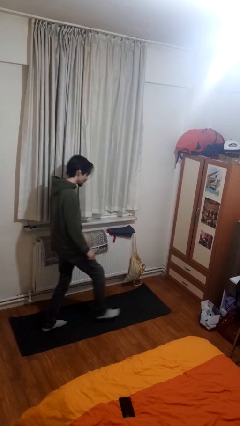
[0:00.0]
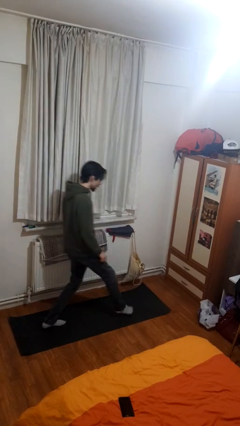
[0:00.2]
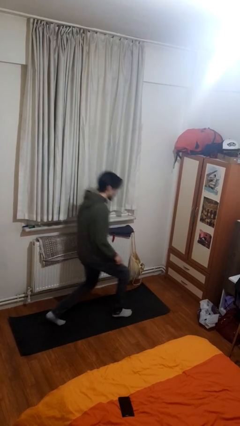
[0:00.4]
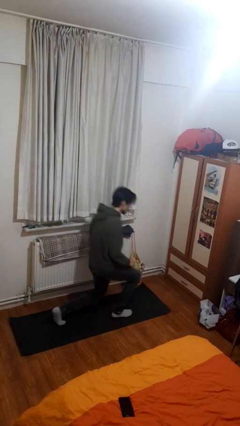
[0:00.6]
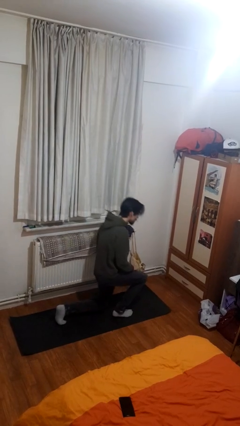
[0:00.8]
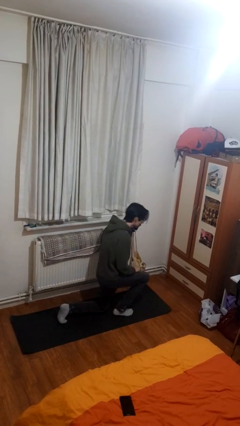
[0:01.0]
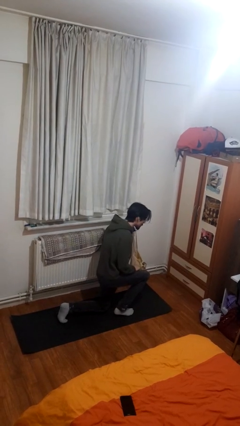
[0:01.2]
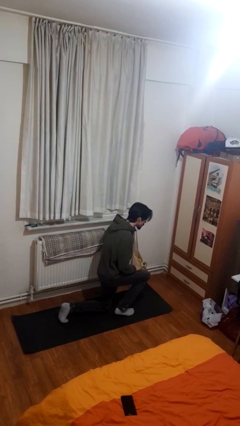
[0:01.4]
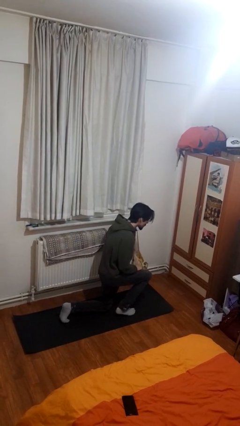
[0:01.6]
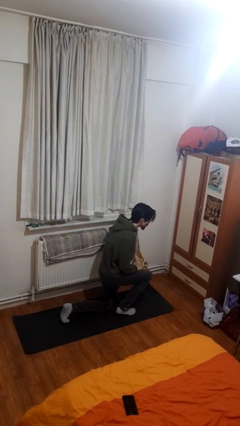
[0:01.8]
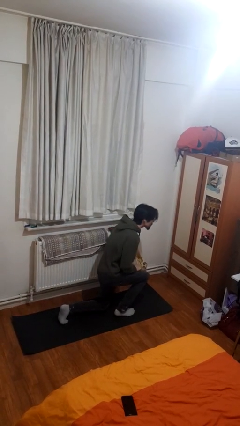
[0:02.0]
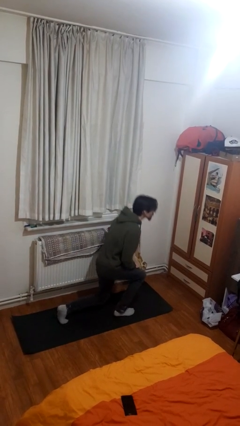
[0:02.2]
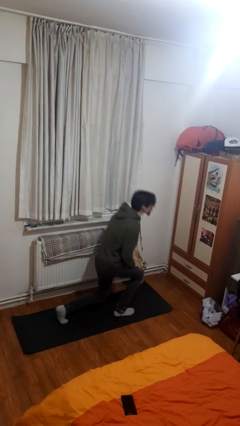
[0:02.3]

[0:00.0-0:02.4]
person kneels

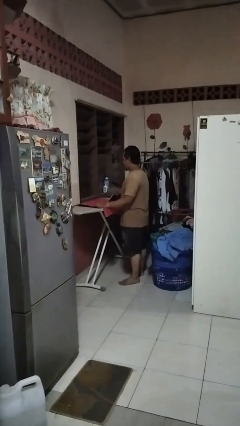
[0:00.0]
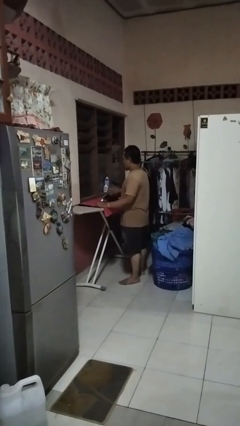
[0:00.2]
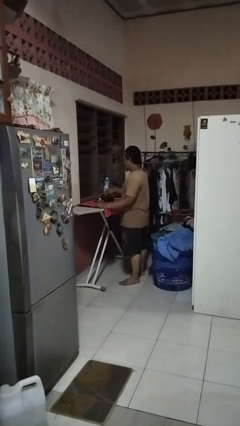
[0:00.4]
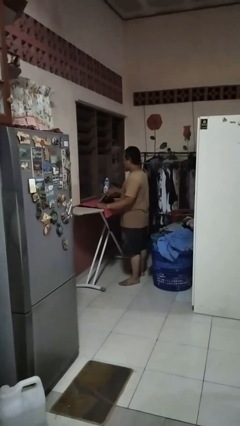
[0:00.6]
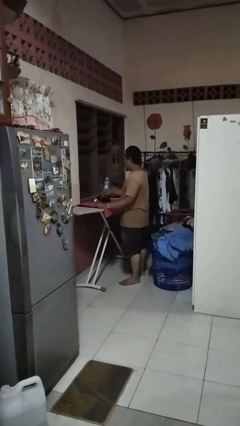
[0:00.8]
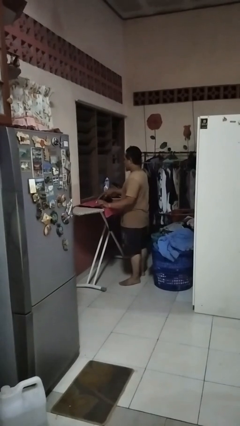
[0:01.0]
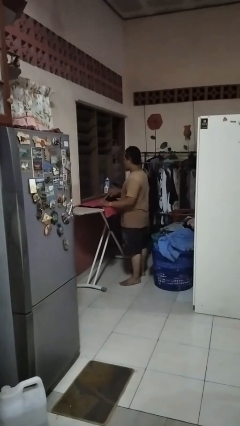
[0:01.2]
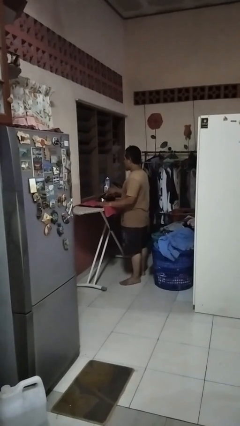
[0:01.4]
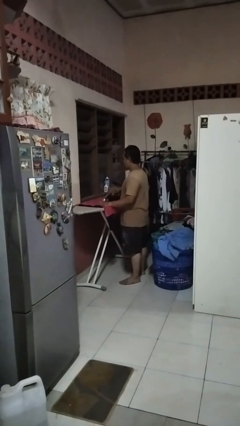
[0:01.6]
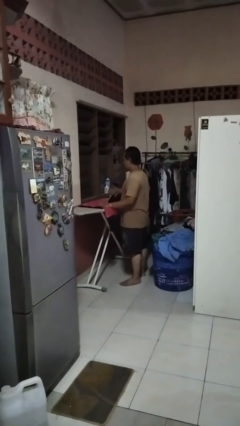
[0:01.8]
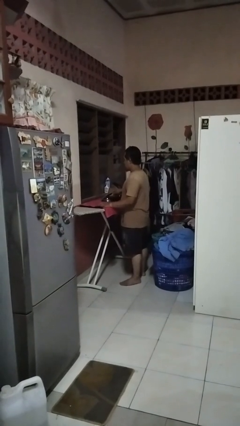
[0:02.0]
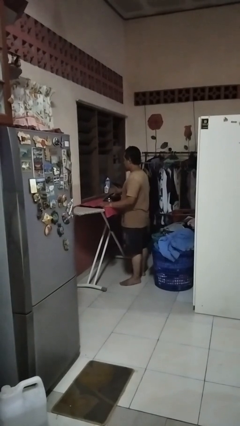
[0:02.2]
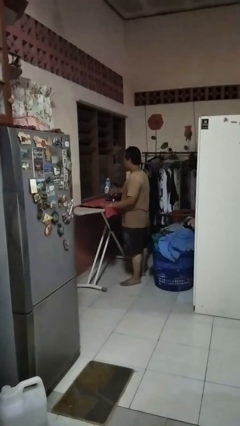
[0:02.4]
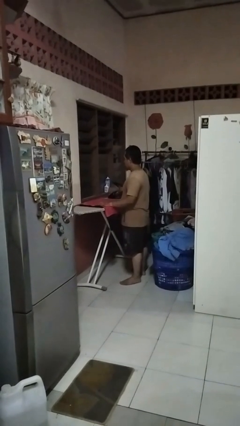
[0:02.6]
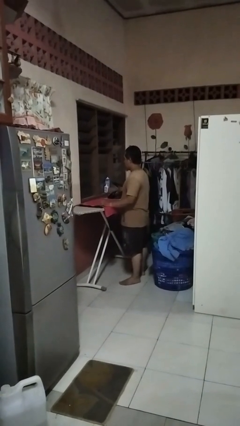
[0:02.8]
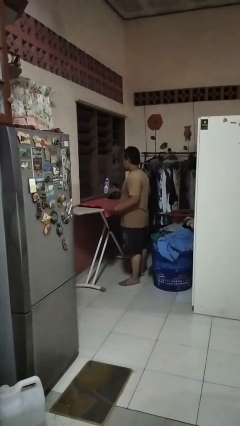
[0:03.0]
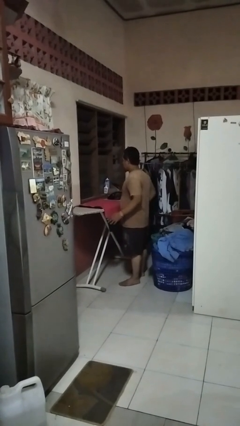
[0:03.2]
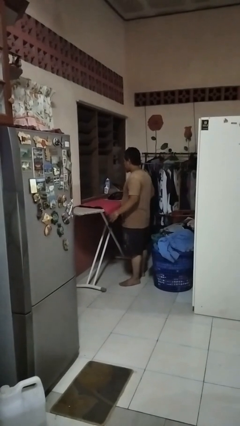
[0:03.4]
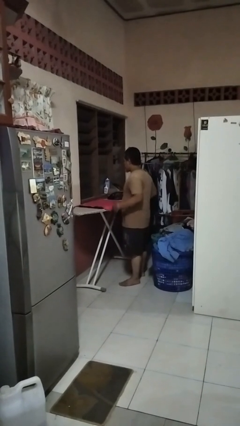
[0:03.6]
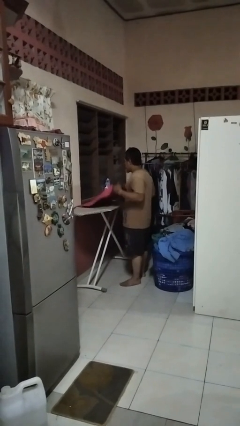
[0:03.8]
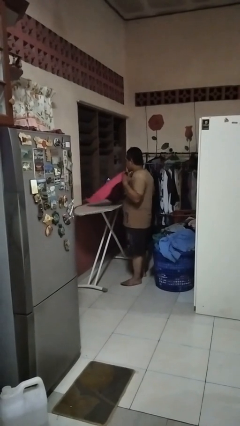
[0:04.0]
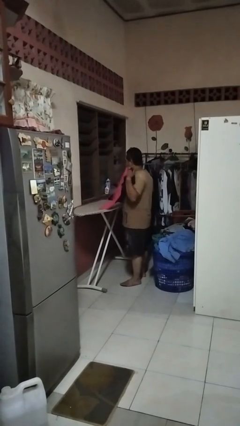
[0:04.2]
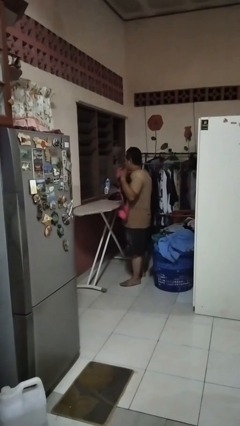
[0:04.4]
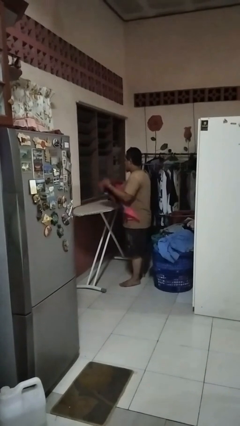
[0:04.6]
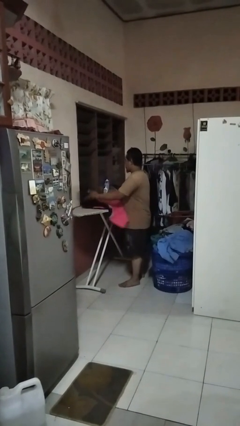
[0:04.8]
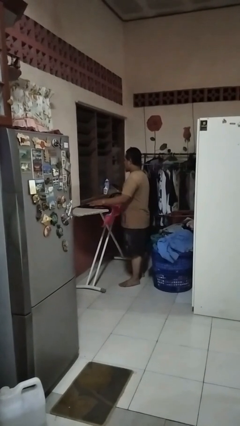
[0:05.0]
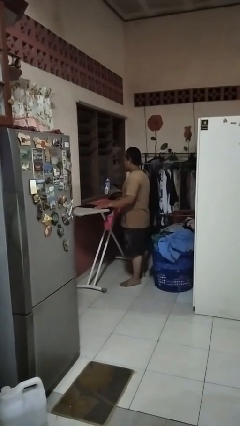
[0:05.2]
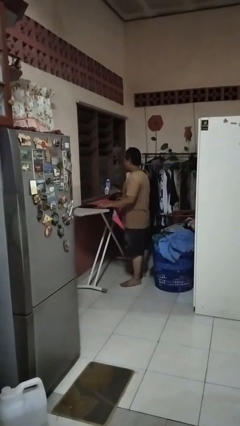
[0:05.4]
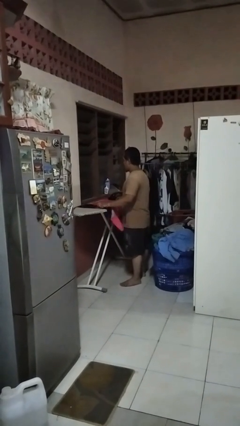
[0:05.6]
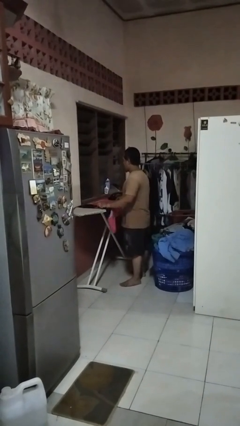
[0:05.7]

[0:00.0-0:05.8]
person irons clothes

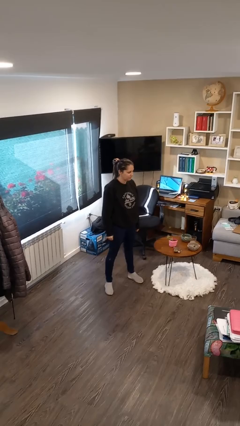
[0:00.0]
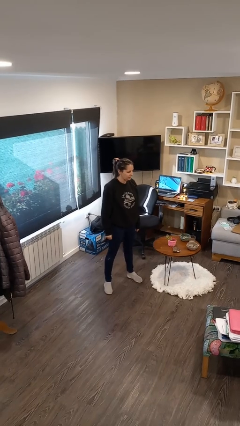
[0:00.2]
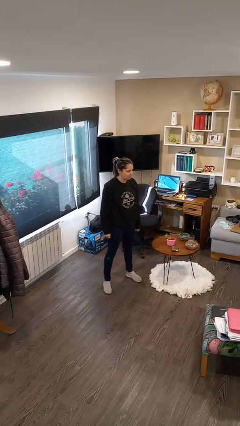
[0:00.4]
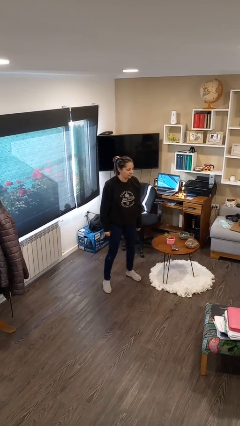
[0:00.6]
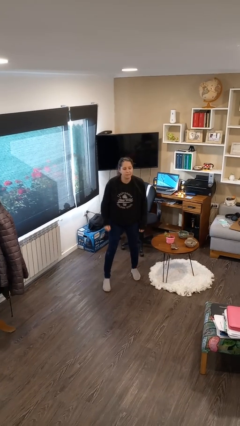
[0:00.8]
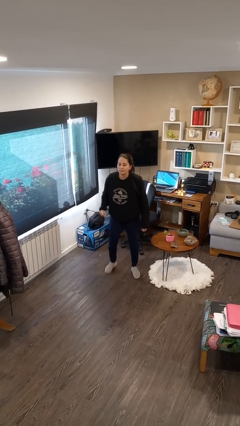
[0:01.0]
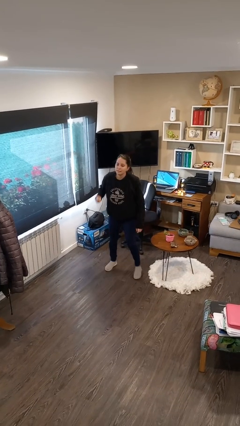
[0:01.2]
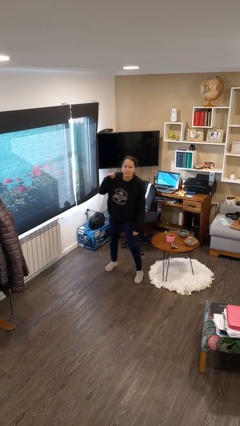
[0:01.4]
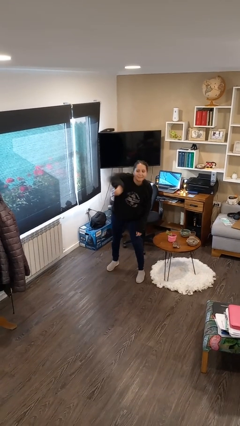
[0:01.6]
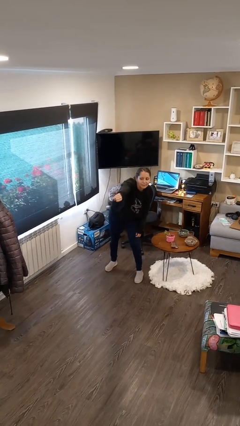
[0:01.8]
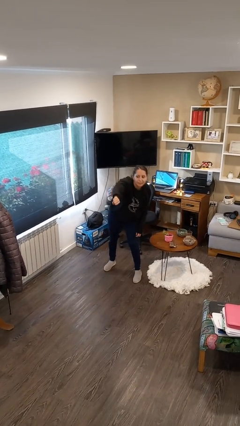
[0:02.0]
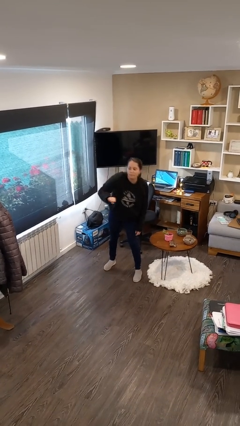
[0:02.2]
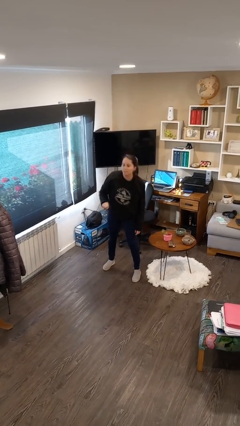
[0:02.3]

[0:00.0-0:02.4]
person punches

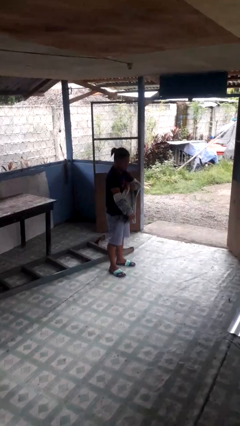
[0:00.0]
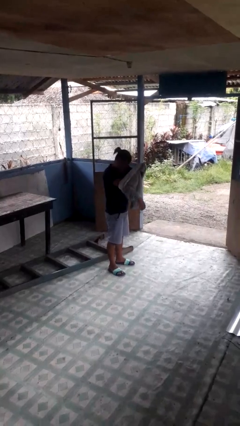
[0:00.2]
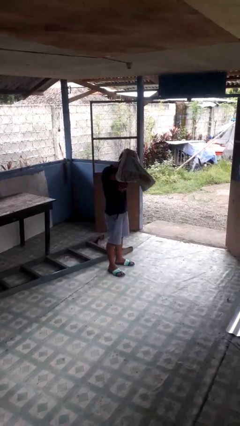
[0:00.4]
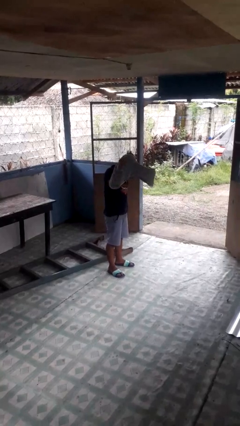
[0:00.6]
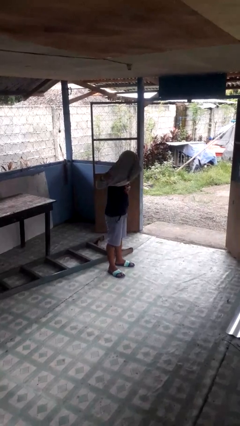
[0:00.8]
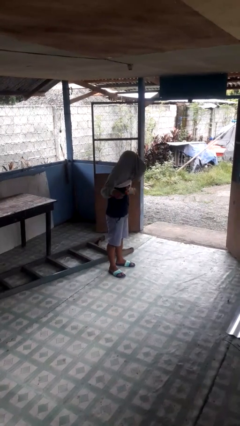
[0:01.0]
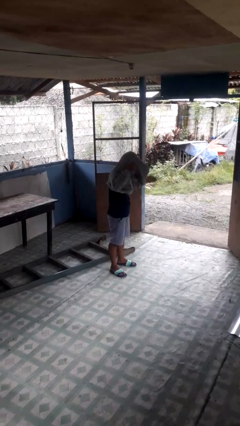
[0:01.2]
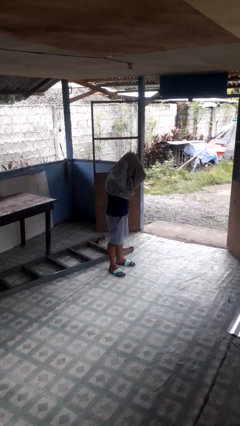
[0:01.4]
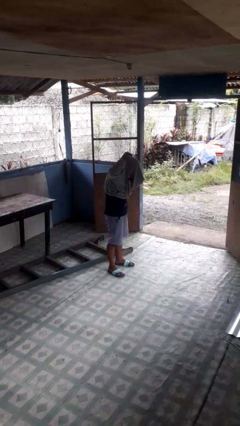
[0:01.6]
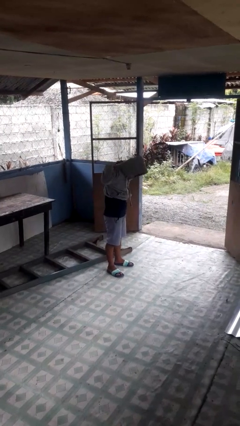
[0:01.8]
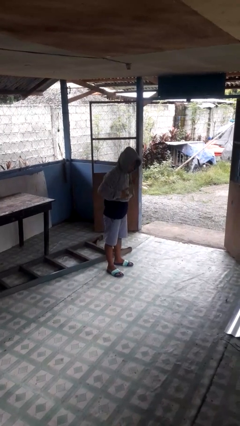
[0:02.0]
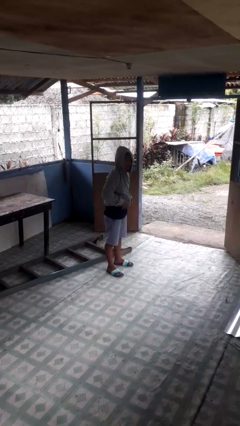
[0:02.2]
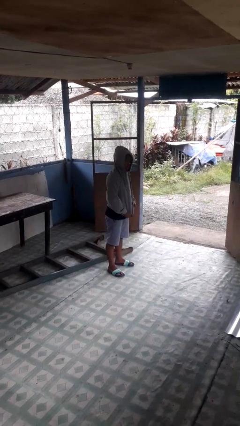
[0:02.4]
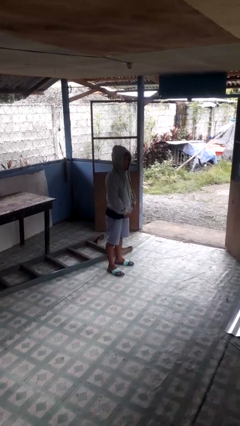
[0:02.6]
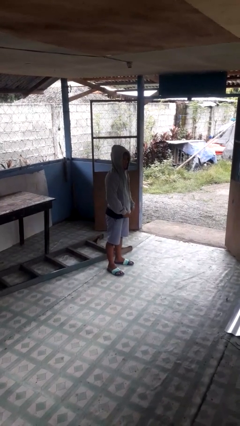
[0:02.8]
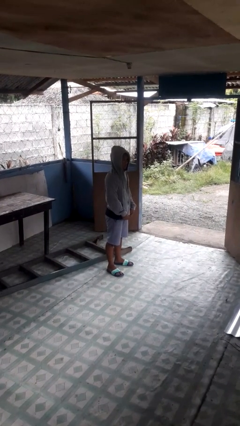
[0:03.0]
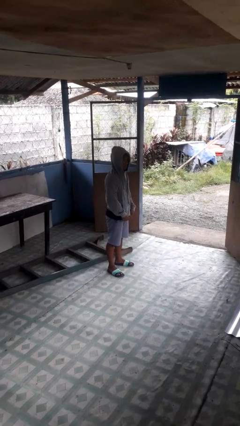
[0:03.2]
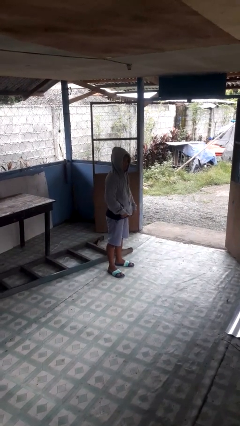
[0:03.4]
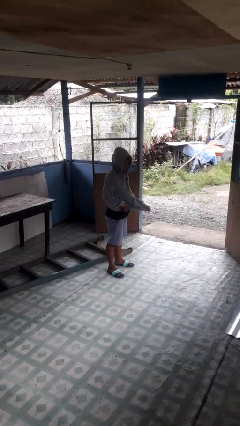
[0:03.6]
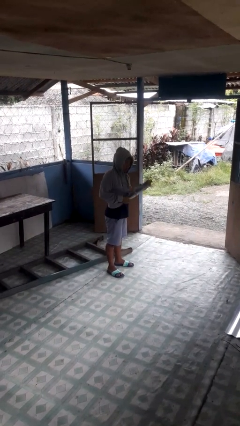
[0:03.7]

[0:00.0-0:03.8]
person puts on hoodie

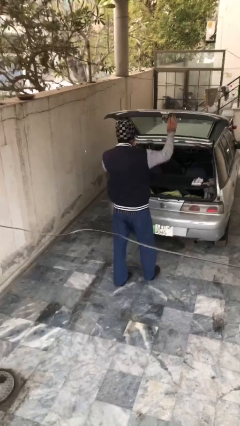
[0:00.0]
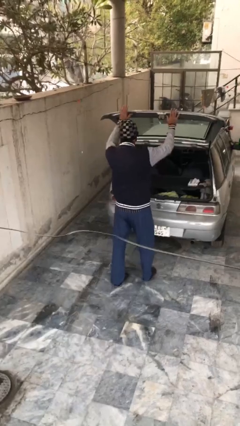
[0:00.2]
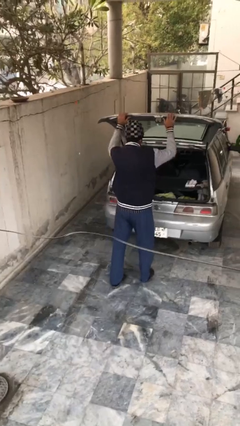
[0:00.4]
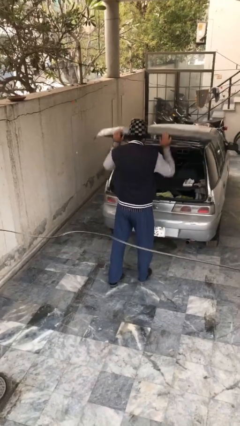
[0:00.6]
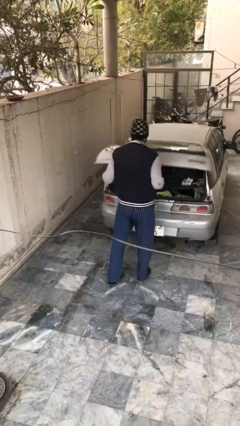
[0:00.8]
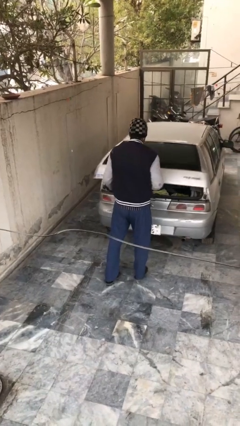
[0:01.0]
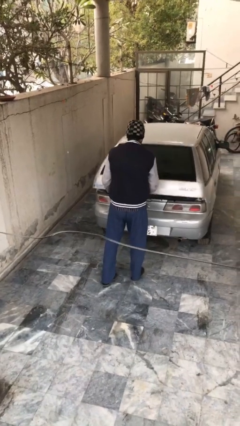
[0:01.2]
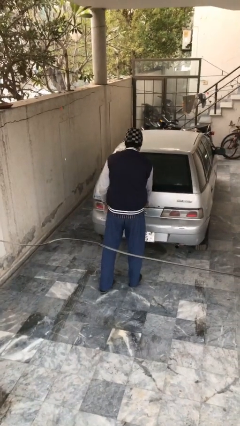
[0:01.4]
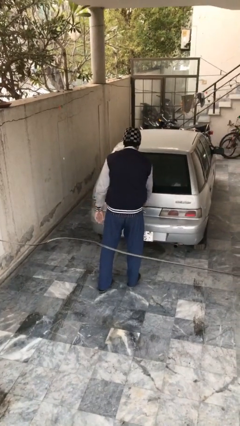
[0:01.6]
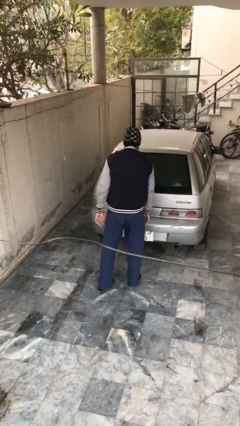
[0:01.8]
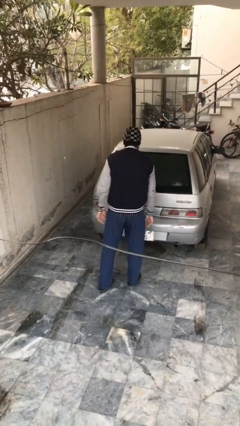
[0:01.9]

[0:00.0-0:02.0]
person closes car trunk

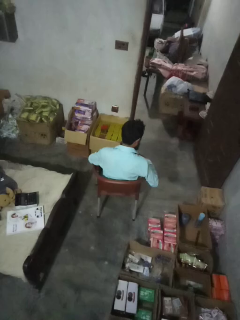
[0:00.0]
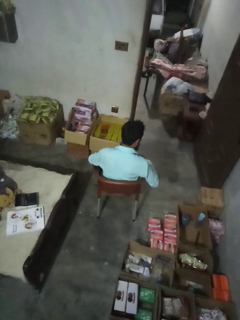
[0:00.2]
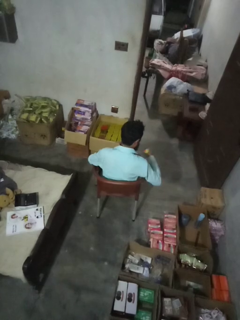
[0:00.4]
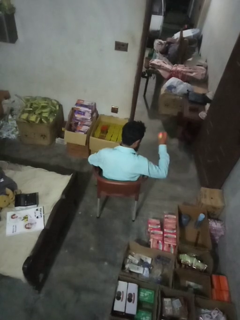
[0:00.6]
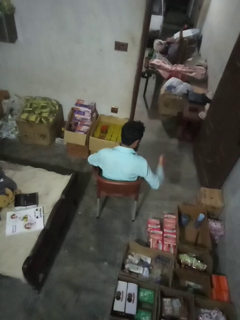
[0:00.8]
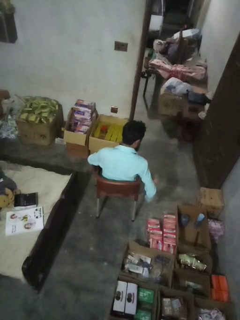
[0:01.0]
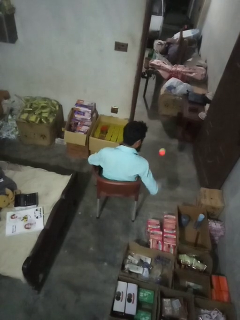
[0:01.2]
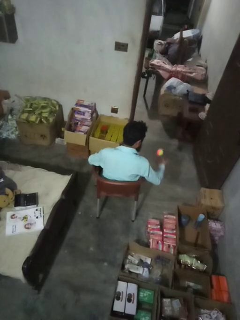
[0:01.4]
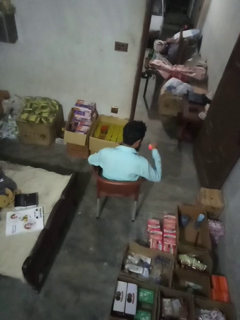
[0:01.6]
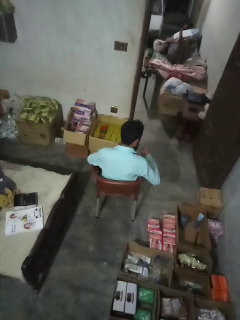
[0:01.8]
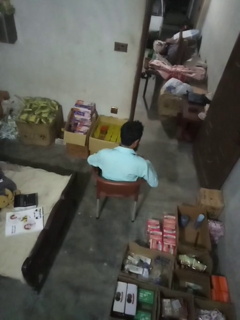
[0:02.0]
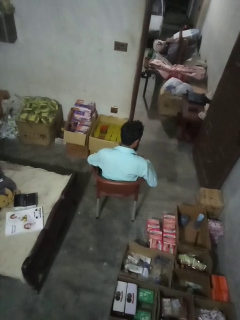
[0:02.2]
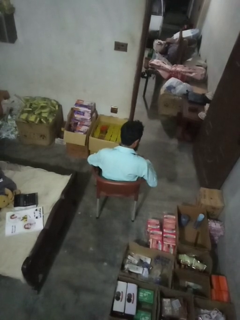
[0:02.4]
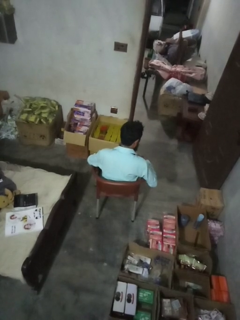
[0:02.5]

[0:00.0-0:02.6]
person bounces ball on floor
